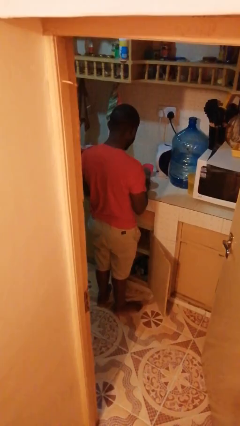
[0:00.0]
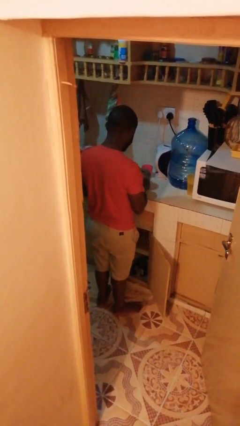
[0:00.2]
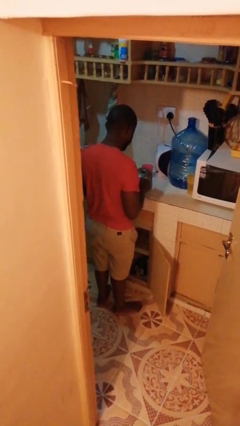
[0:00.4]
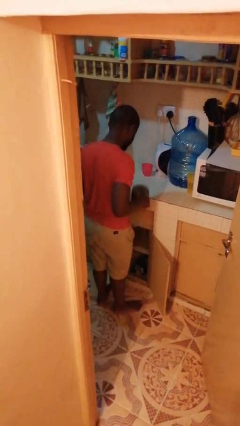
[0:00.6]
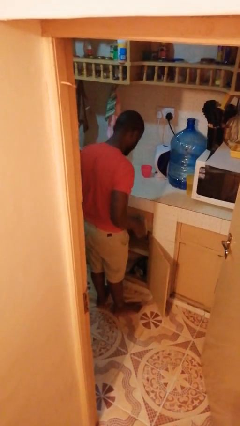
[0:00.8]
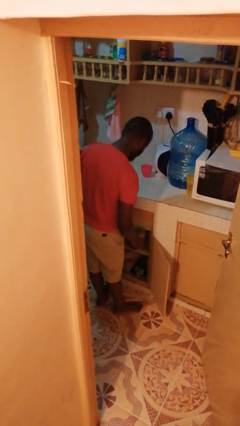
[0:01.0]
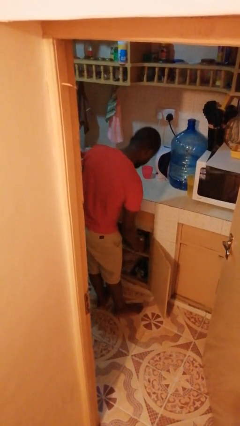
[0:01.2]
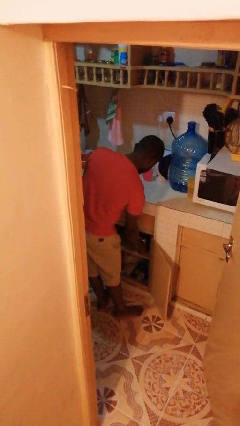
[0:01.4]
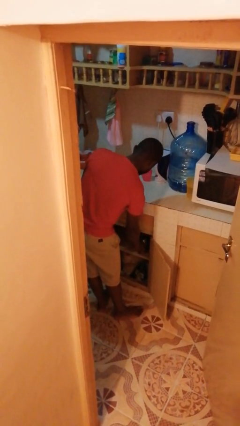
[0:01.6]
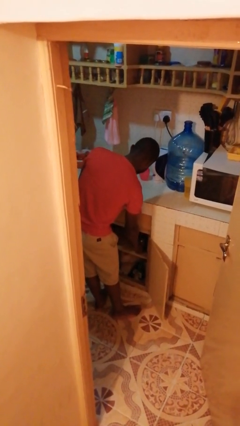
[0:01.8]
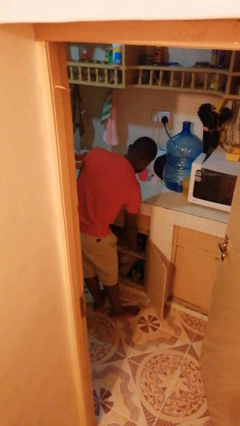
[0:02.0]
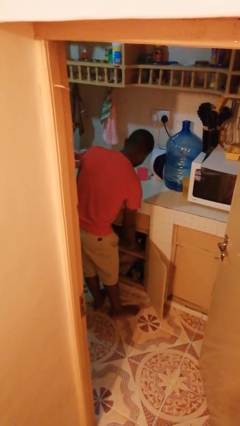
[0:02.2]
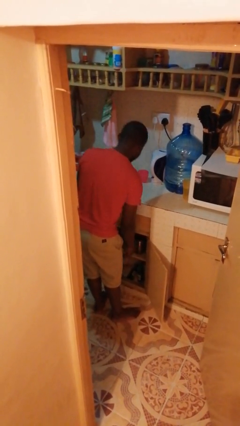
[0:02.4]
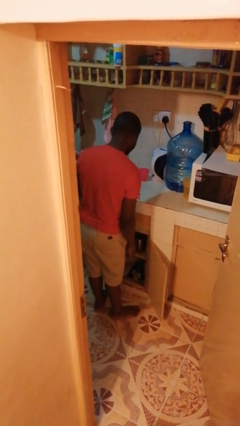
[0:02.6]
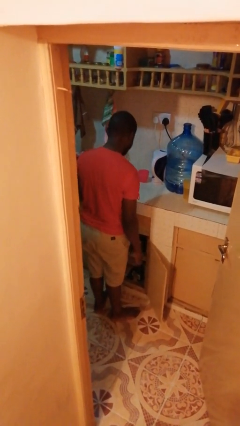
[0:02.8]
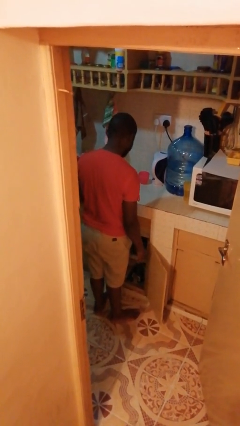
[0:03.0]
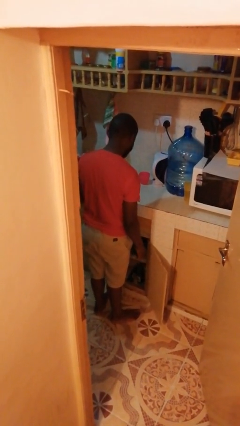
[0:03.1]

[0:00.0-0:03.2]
person puts object in cabinet

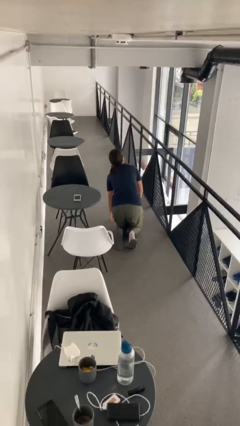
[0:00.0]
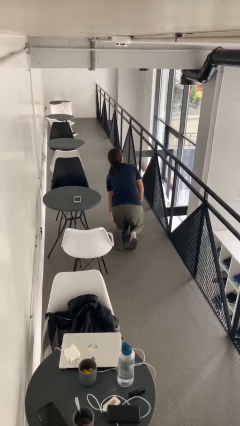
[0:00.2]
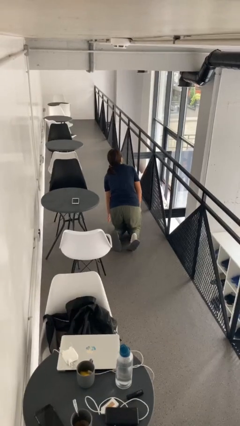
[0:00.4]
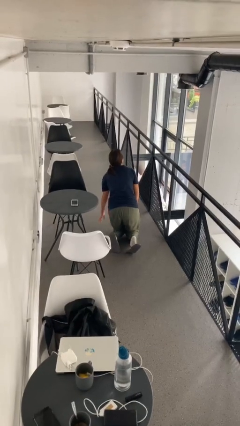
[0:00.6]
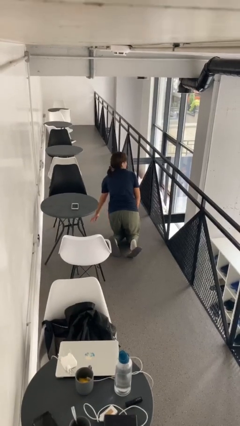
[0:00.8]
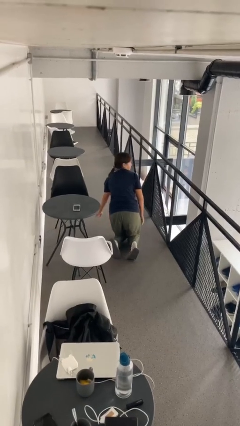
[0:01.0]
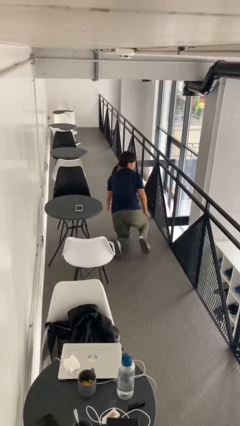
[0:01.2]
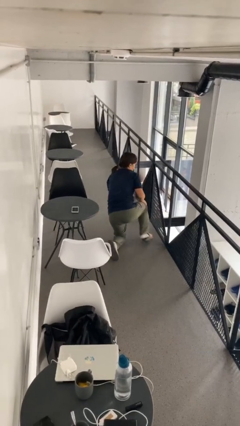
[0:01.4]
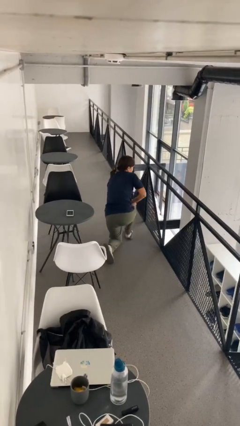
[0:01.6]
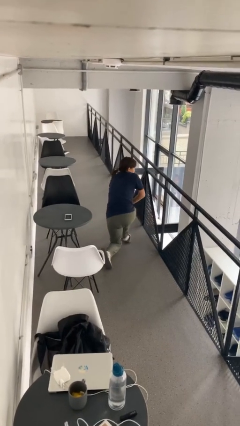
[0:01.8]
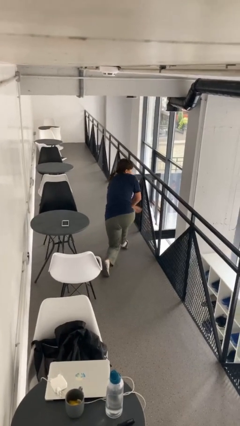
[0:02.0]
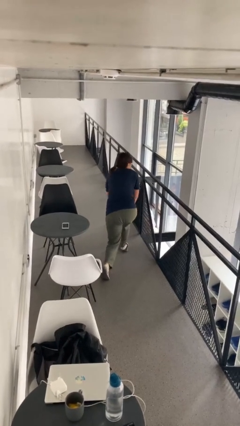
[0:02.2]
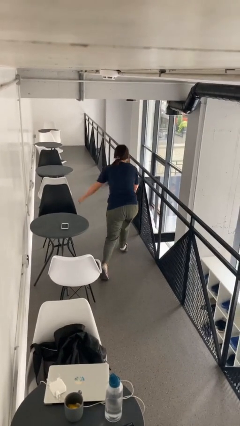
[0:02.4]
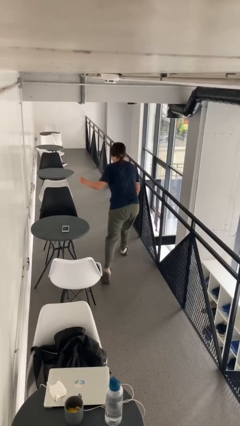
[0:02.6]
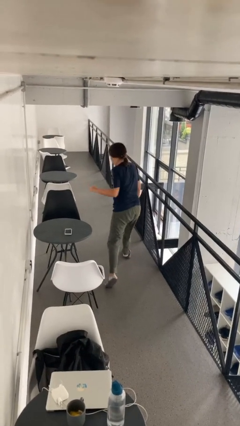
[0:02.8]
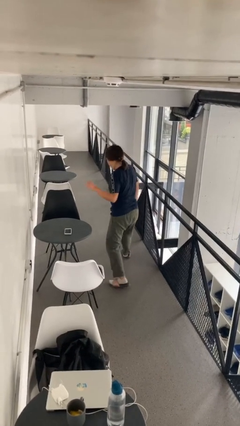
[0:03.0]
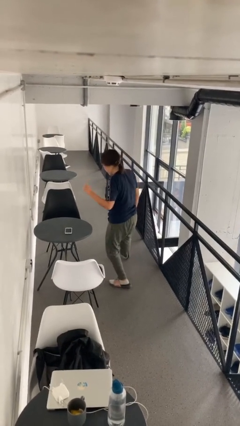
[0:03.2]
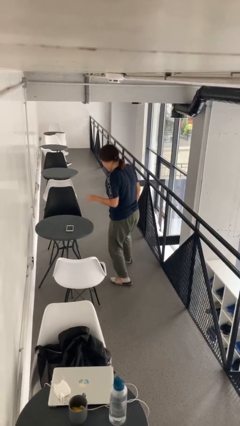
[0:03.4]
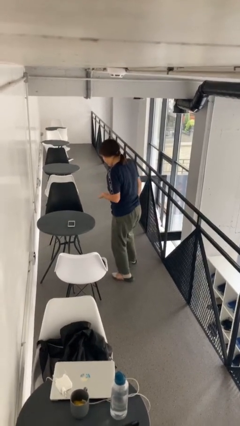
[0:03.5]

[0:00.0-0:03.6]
person stands up from floor

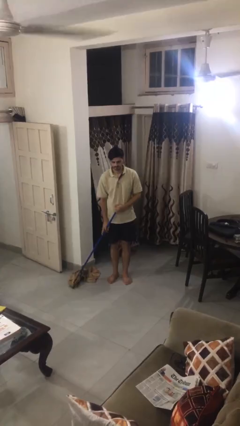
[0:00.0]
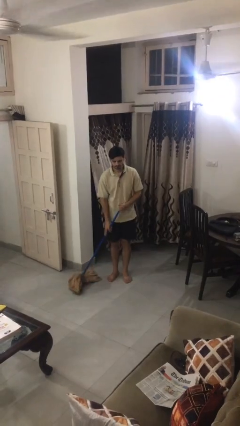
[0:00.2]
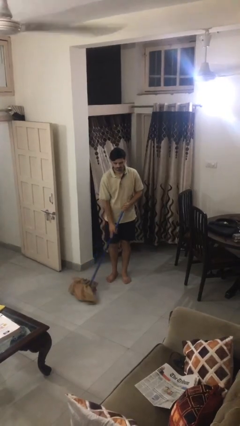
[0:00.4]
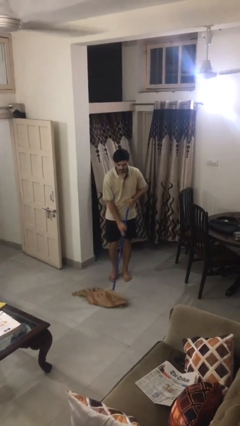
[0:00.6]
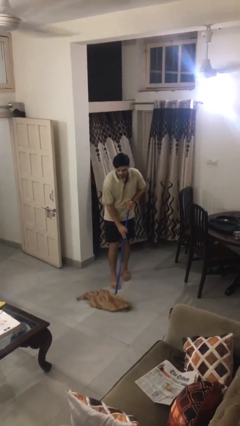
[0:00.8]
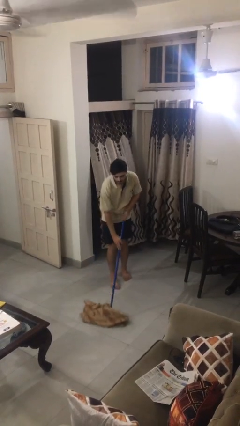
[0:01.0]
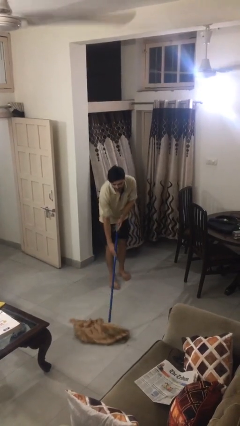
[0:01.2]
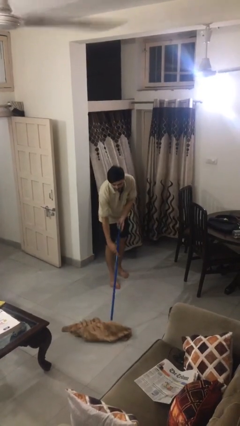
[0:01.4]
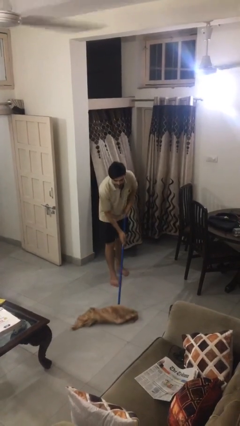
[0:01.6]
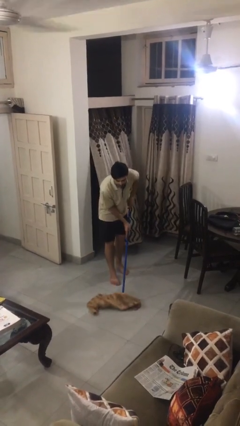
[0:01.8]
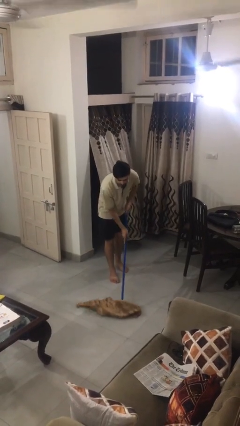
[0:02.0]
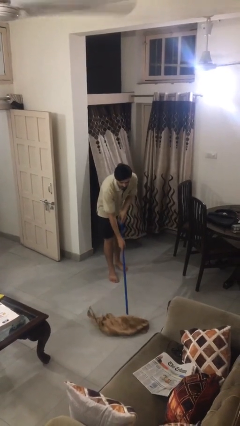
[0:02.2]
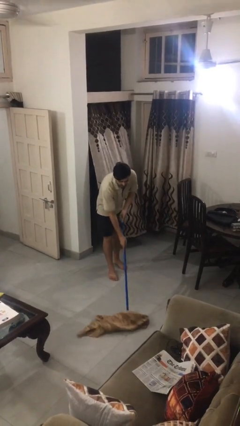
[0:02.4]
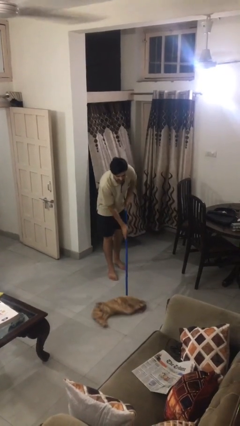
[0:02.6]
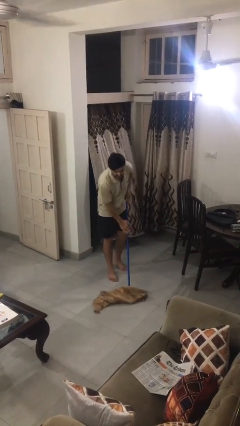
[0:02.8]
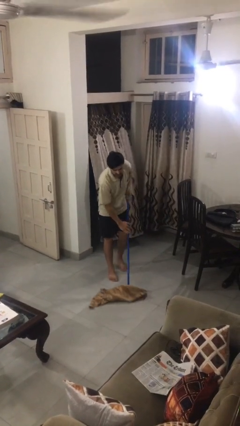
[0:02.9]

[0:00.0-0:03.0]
person mops

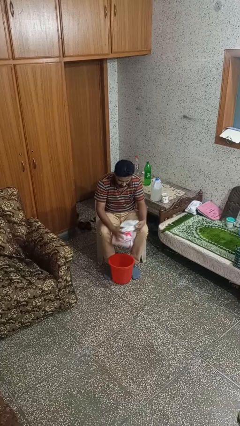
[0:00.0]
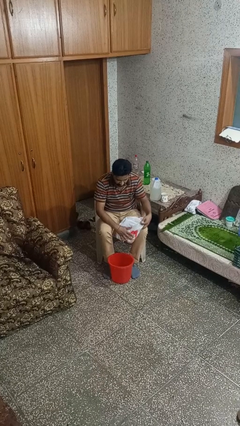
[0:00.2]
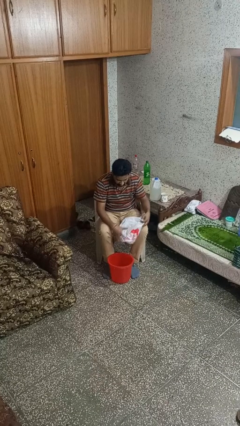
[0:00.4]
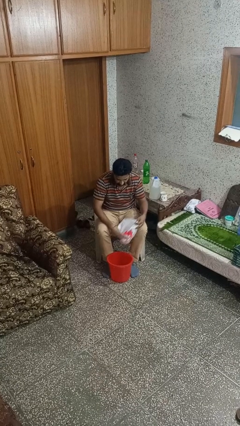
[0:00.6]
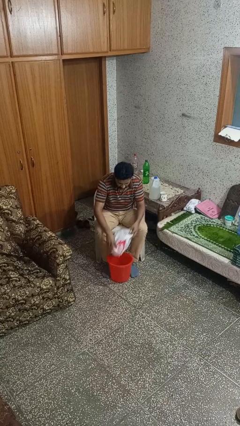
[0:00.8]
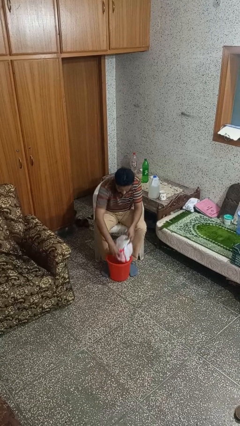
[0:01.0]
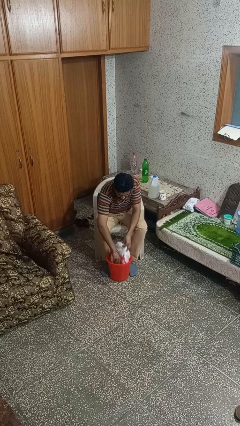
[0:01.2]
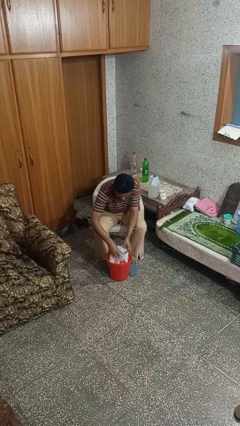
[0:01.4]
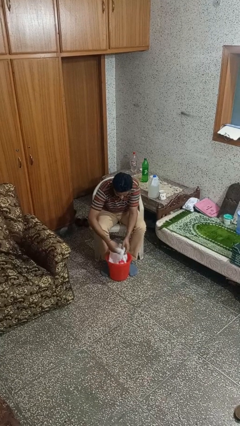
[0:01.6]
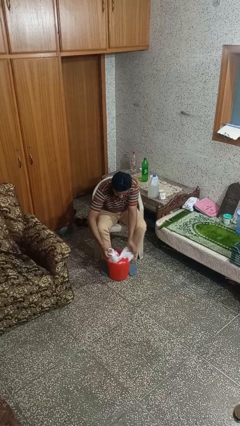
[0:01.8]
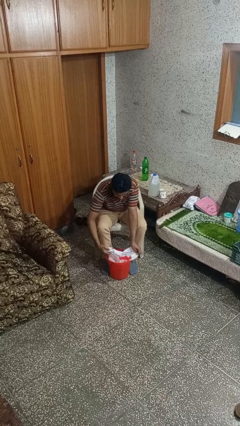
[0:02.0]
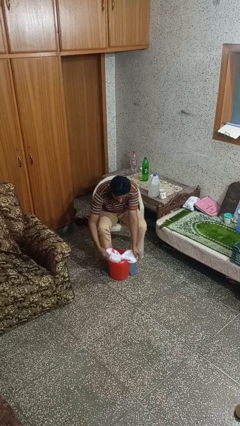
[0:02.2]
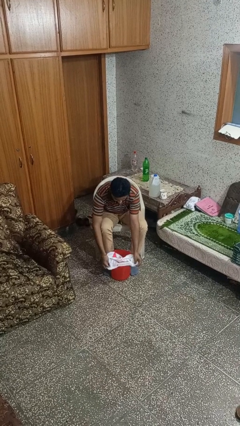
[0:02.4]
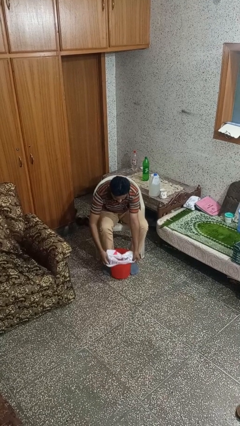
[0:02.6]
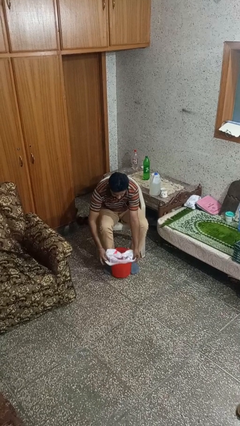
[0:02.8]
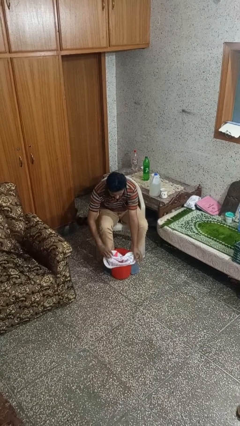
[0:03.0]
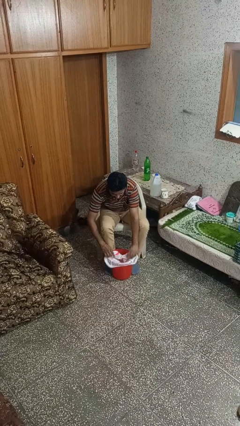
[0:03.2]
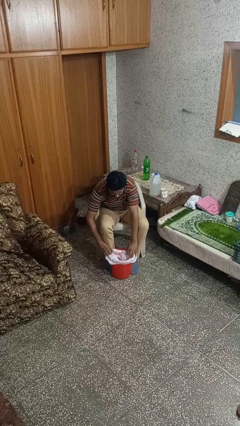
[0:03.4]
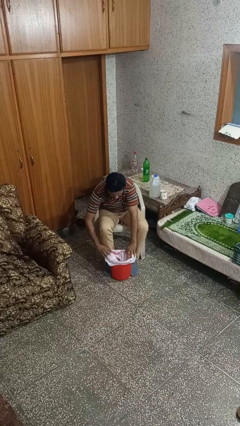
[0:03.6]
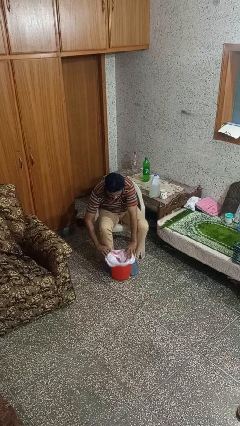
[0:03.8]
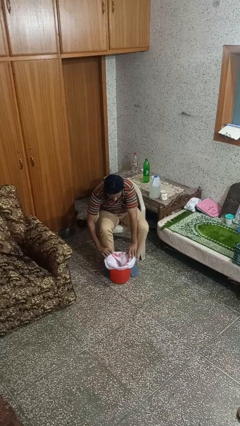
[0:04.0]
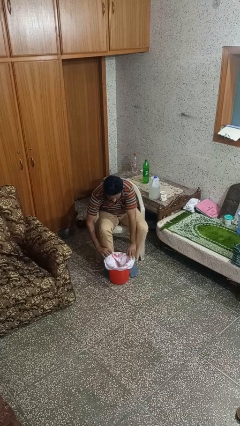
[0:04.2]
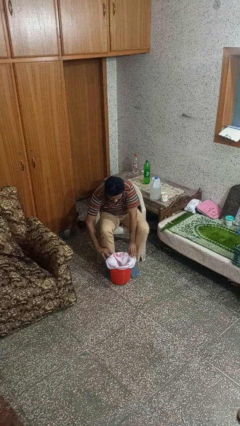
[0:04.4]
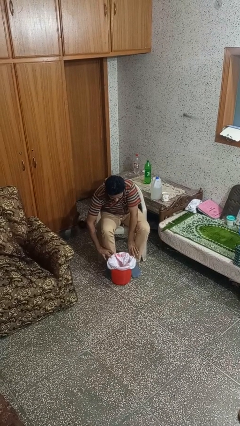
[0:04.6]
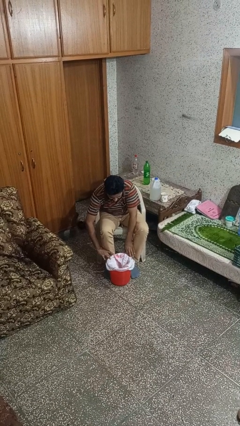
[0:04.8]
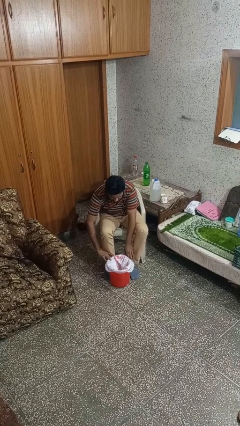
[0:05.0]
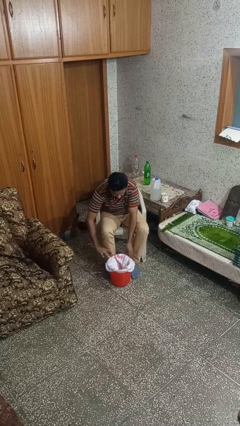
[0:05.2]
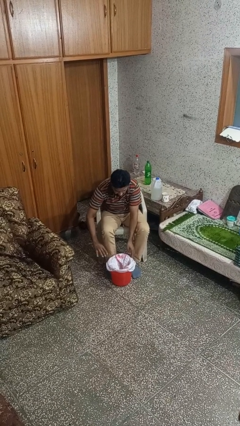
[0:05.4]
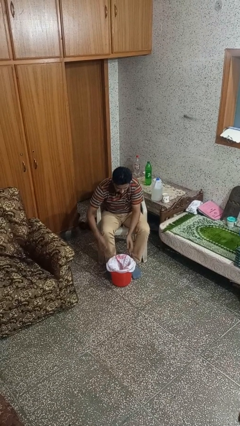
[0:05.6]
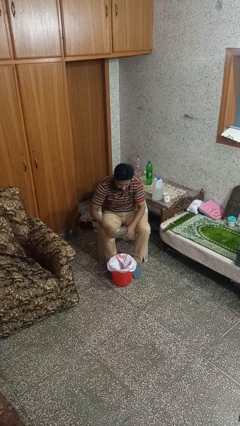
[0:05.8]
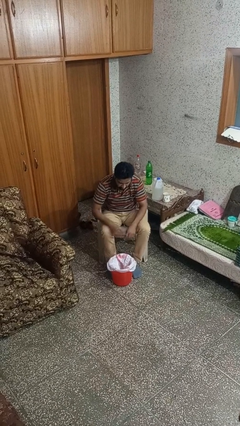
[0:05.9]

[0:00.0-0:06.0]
person inserts trashbag into trashcan

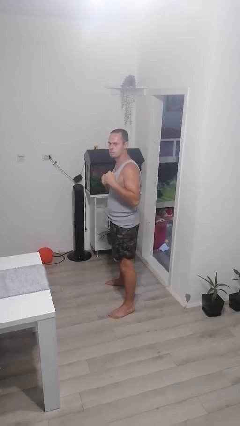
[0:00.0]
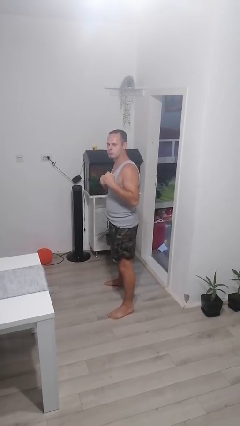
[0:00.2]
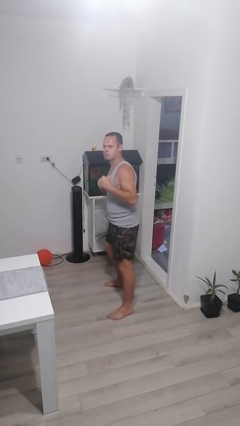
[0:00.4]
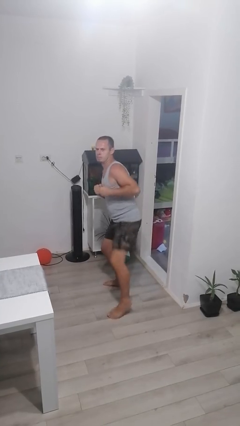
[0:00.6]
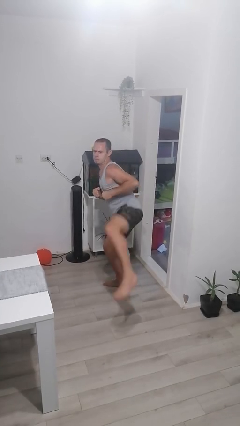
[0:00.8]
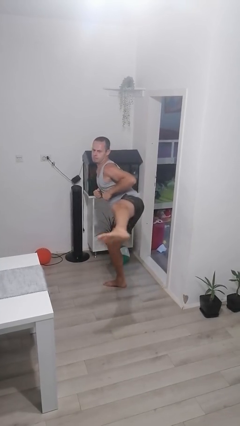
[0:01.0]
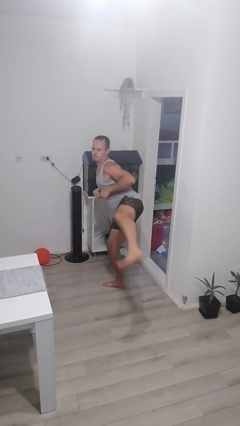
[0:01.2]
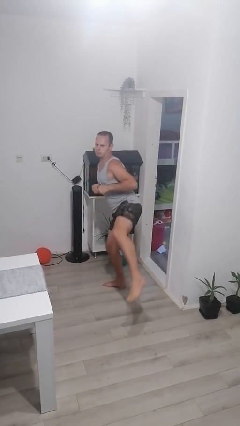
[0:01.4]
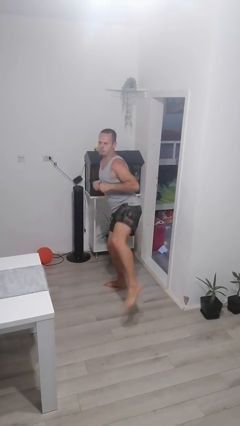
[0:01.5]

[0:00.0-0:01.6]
person karate kicks

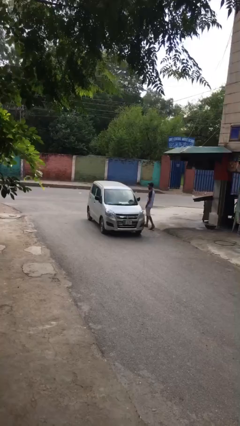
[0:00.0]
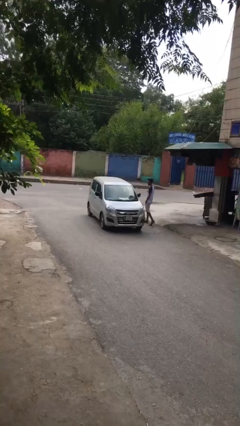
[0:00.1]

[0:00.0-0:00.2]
car picks up person
